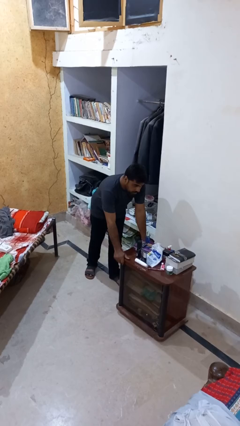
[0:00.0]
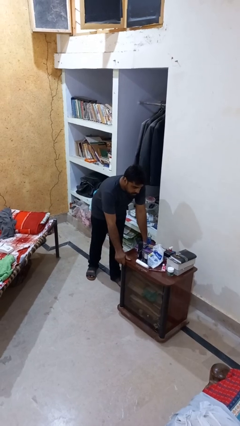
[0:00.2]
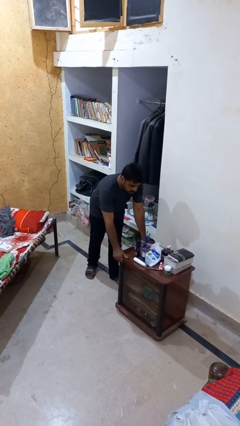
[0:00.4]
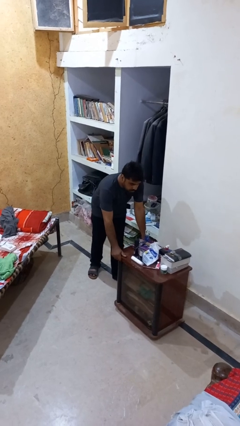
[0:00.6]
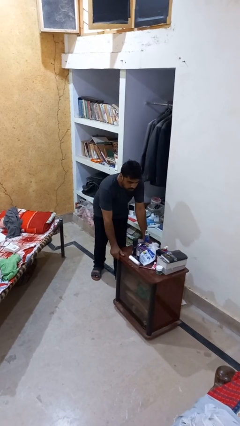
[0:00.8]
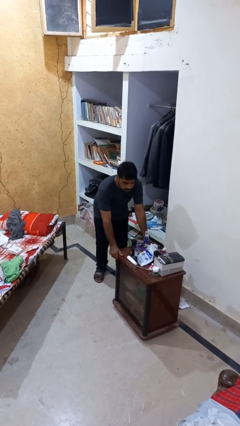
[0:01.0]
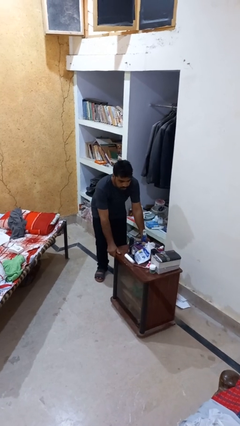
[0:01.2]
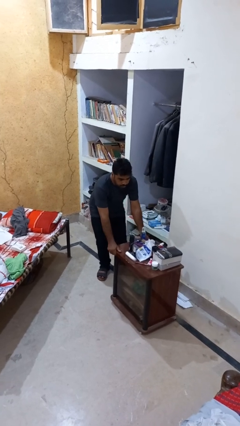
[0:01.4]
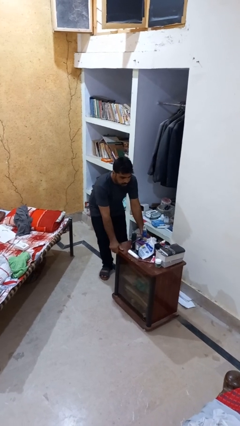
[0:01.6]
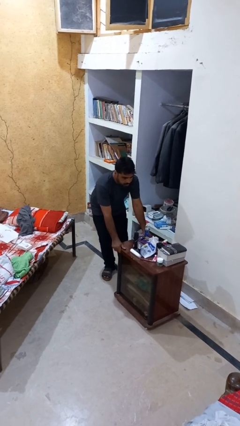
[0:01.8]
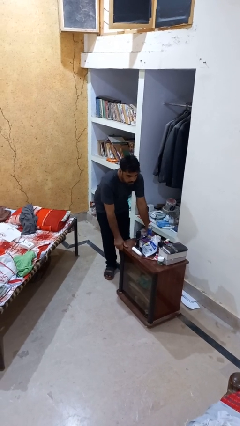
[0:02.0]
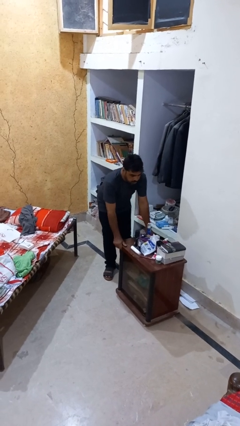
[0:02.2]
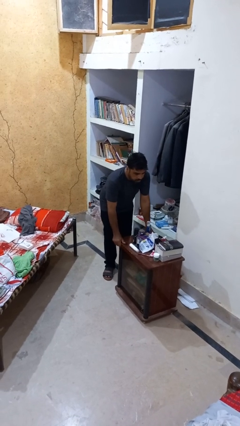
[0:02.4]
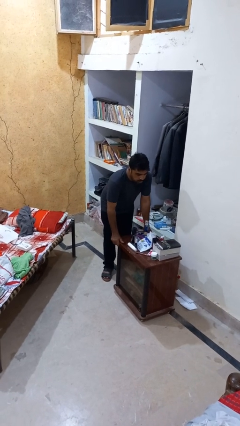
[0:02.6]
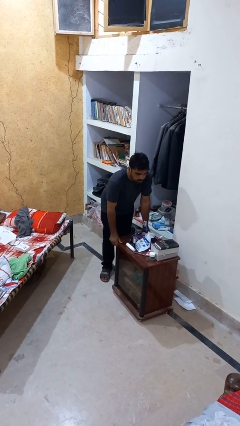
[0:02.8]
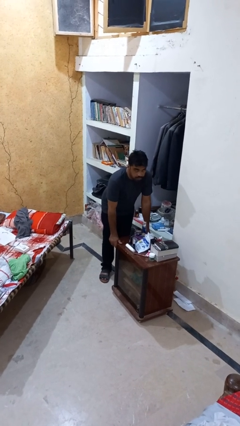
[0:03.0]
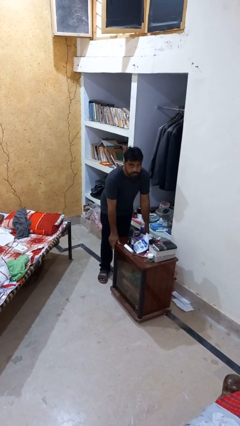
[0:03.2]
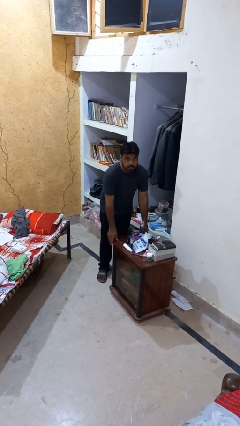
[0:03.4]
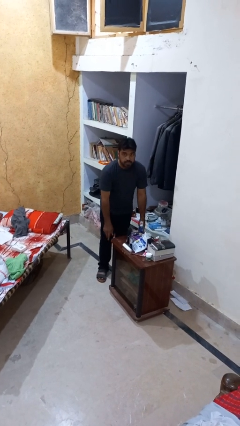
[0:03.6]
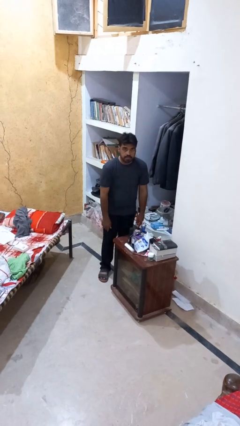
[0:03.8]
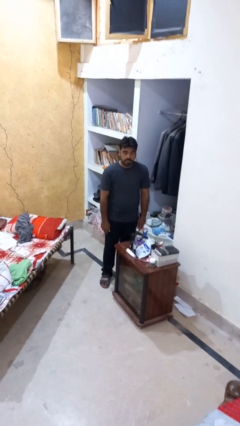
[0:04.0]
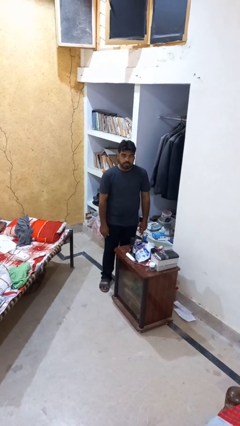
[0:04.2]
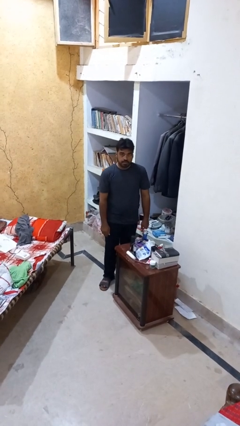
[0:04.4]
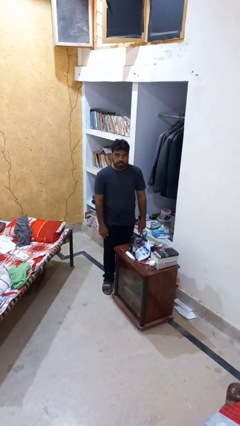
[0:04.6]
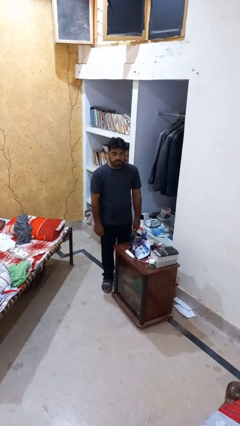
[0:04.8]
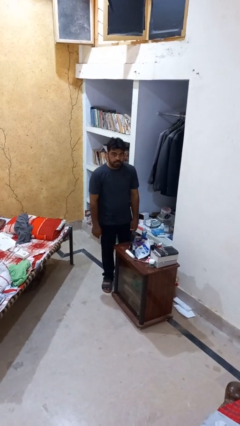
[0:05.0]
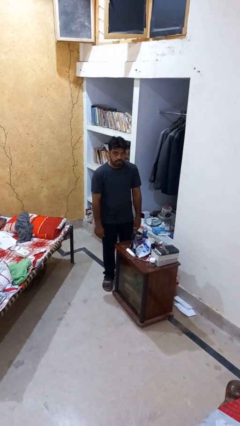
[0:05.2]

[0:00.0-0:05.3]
person pulls wheeled cart

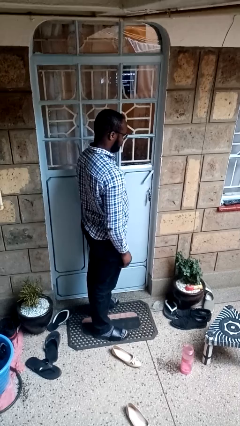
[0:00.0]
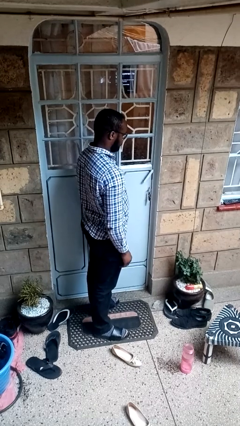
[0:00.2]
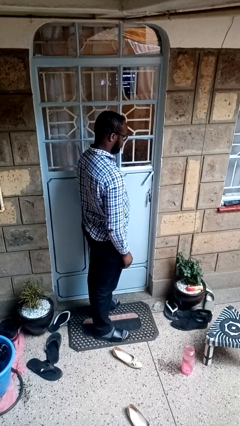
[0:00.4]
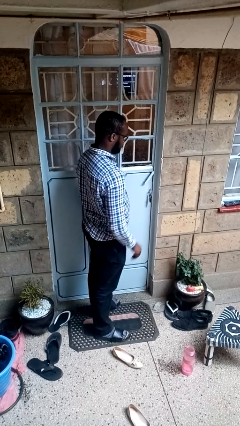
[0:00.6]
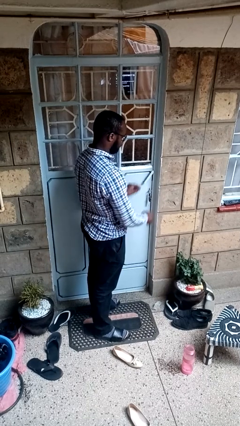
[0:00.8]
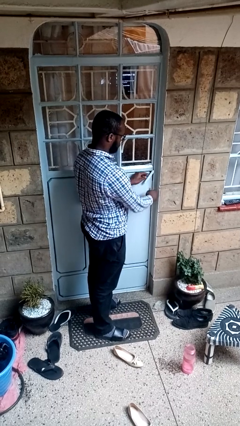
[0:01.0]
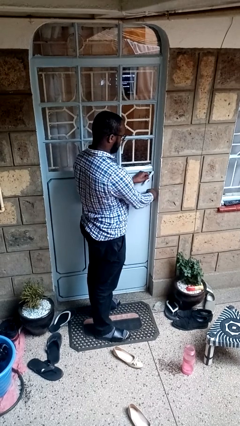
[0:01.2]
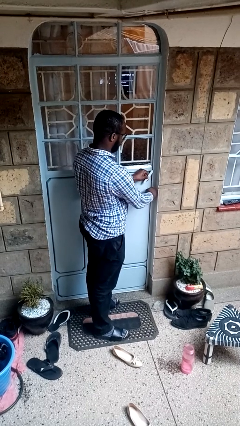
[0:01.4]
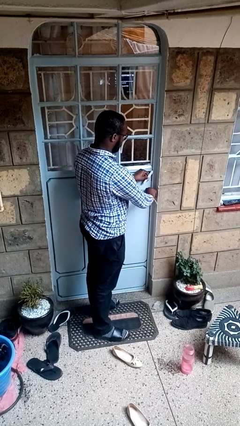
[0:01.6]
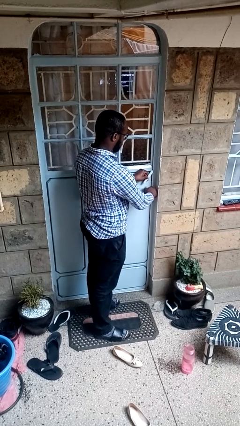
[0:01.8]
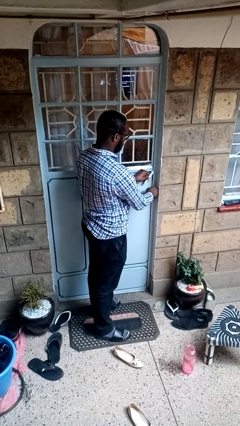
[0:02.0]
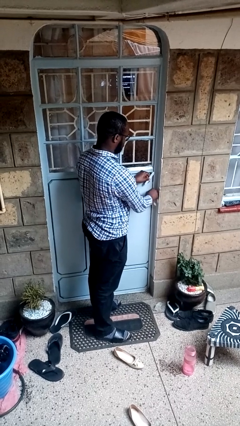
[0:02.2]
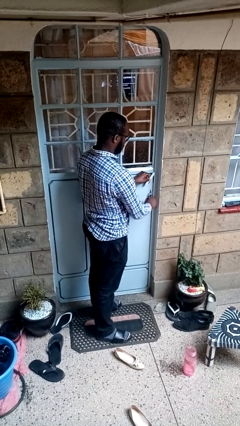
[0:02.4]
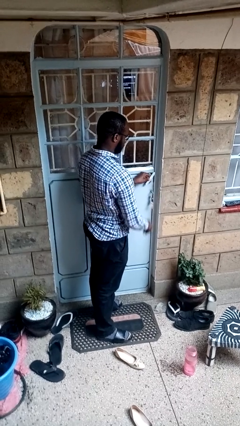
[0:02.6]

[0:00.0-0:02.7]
person unlocks door with keys

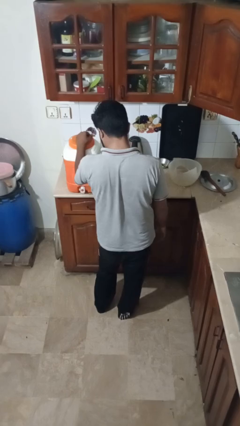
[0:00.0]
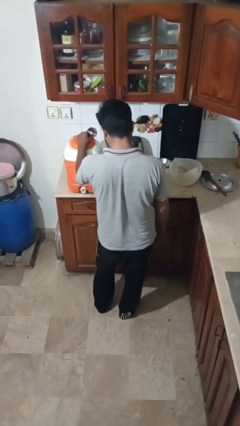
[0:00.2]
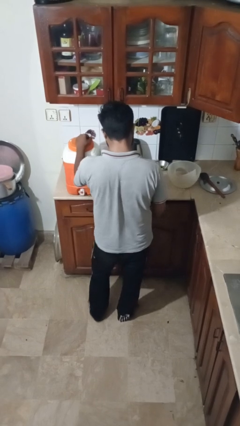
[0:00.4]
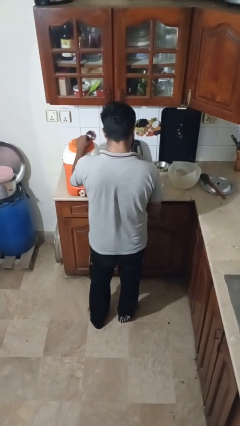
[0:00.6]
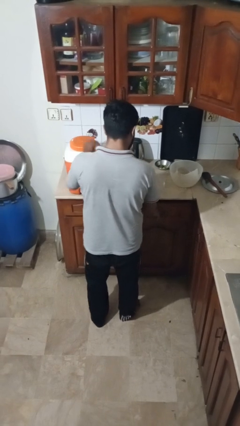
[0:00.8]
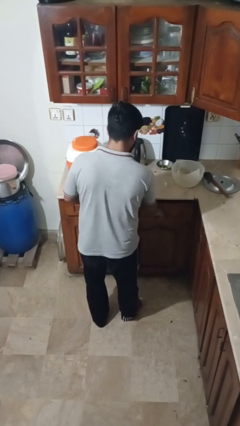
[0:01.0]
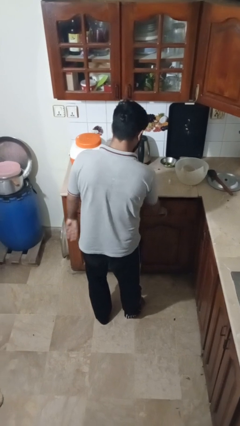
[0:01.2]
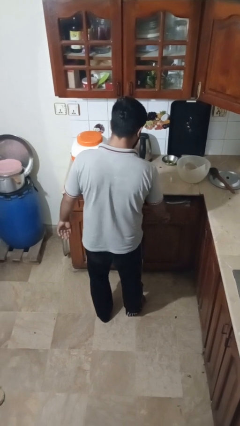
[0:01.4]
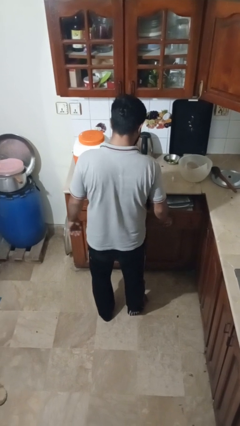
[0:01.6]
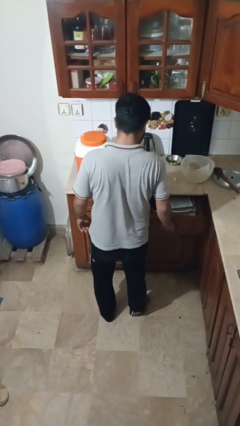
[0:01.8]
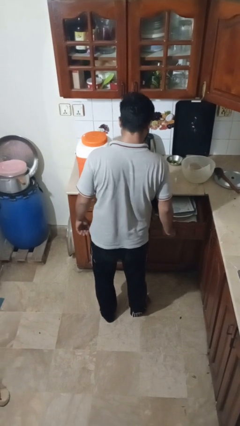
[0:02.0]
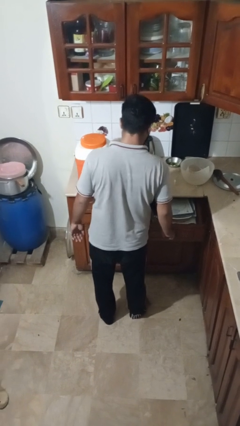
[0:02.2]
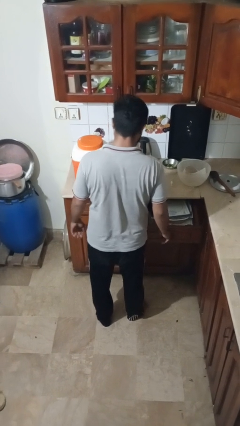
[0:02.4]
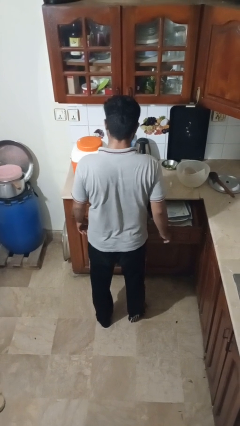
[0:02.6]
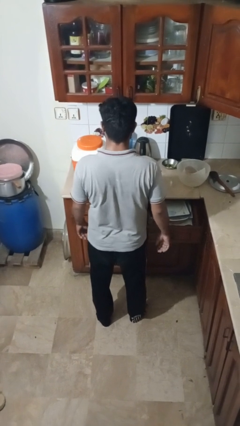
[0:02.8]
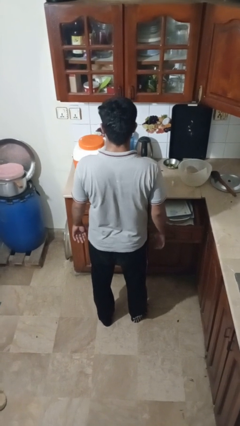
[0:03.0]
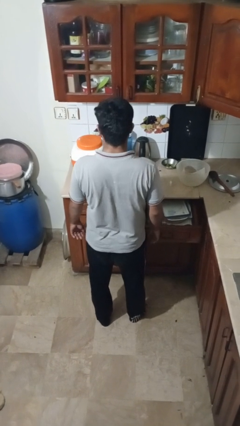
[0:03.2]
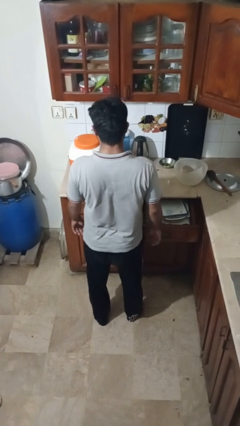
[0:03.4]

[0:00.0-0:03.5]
person opens kitchen drawer

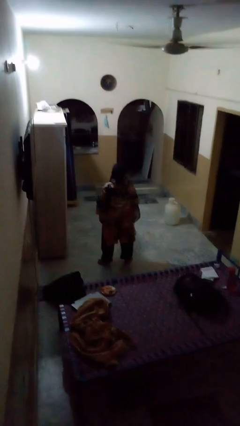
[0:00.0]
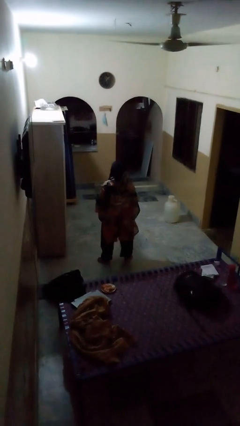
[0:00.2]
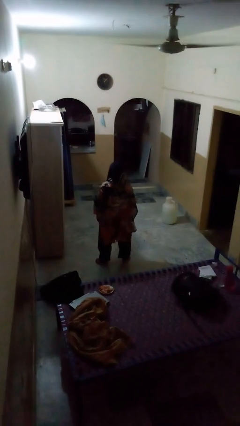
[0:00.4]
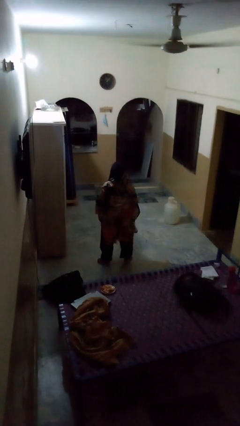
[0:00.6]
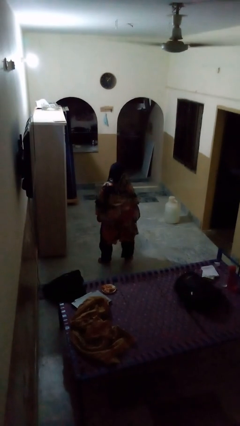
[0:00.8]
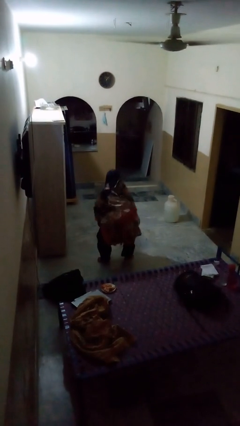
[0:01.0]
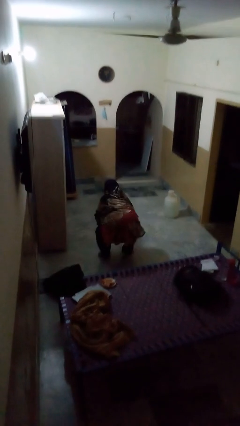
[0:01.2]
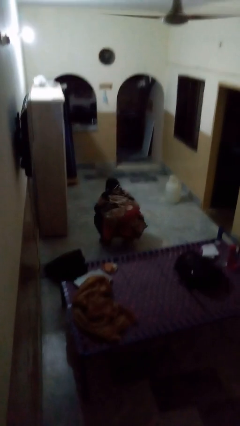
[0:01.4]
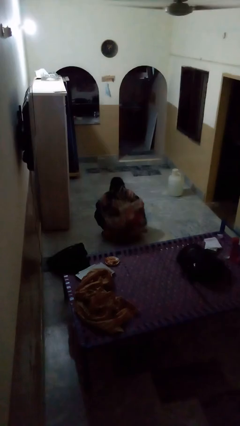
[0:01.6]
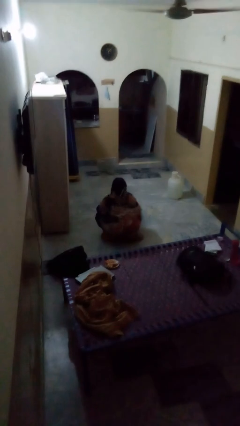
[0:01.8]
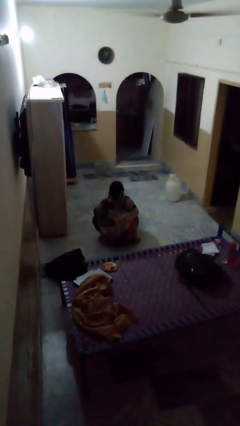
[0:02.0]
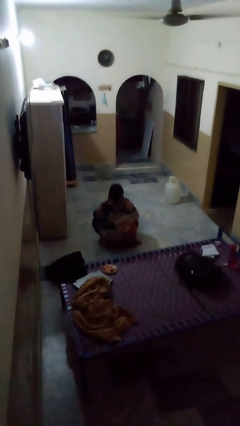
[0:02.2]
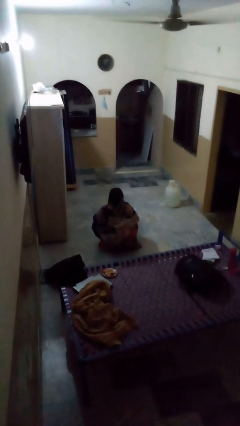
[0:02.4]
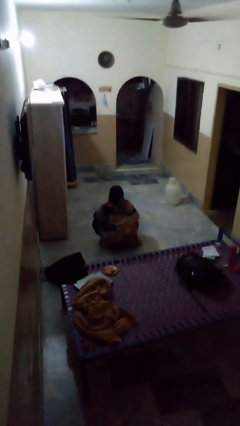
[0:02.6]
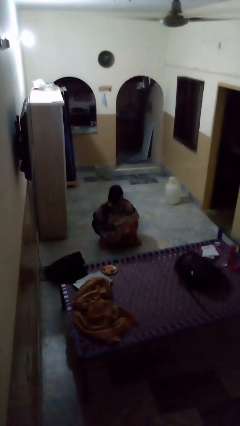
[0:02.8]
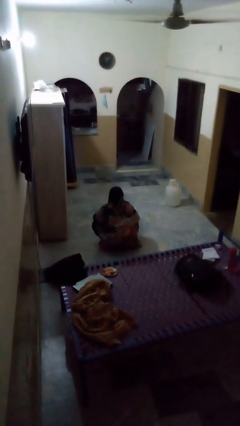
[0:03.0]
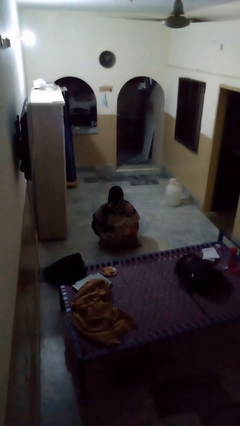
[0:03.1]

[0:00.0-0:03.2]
person squats

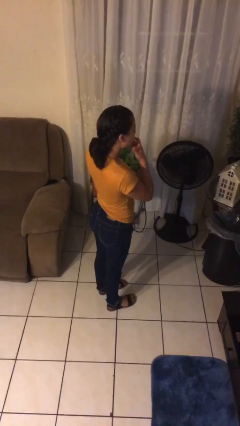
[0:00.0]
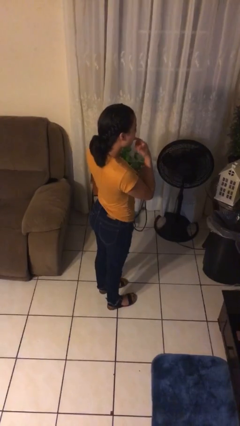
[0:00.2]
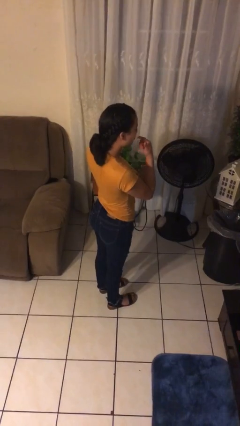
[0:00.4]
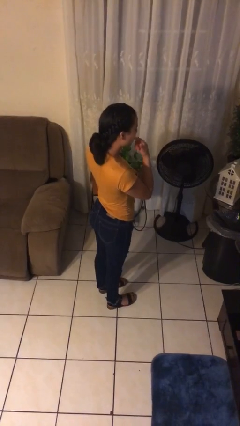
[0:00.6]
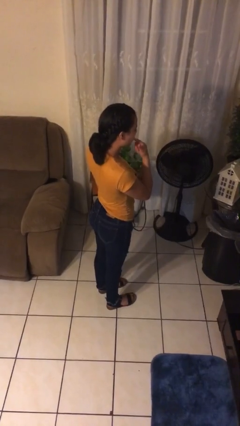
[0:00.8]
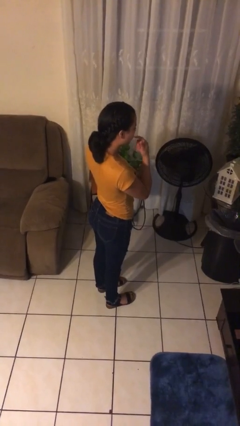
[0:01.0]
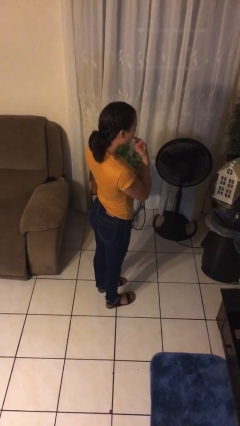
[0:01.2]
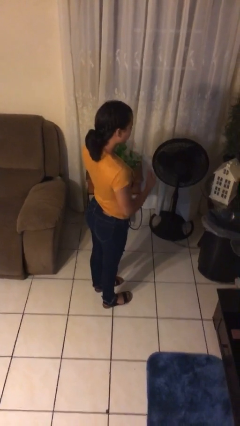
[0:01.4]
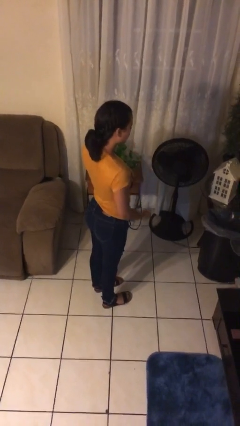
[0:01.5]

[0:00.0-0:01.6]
person licks fingers

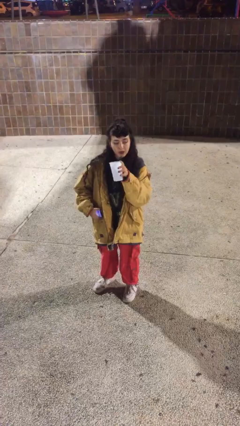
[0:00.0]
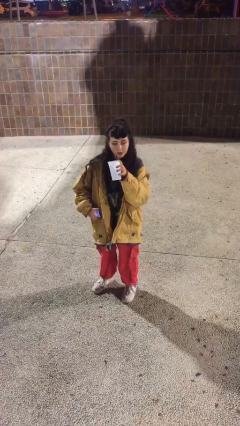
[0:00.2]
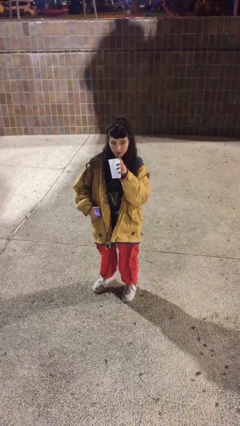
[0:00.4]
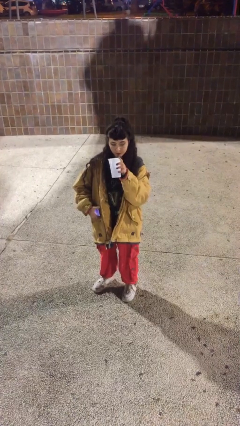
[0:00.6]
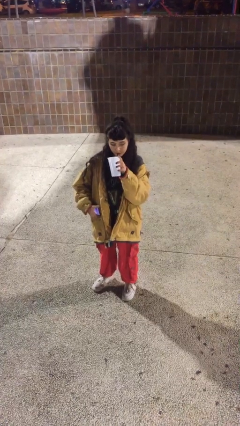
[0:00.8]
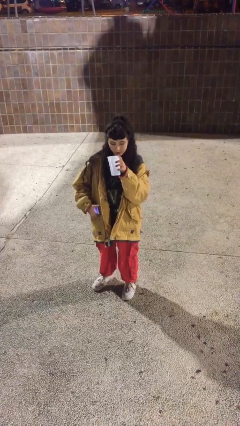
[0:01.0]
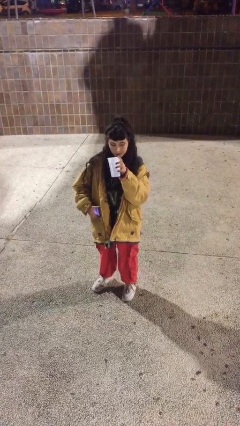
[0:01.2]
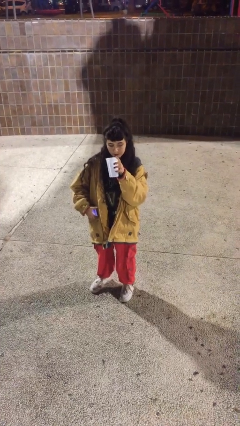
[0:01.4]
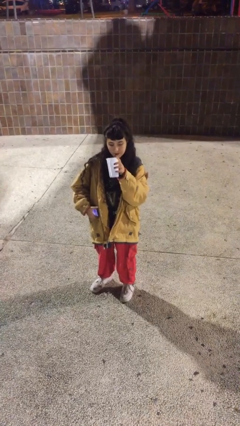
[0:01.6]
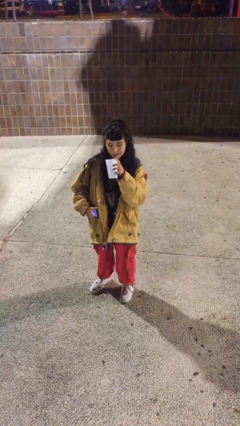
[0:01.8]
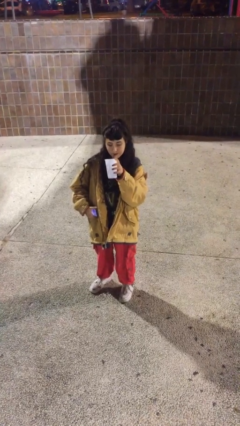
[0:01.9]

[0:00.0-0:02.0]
person drinks from straw
